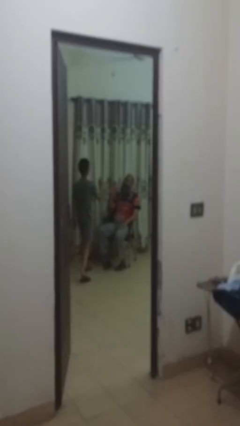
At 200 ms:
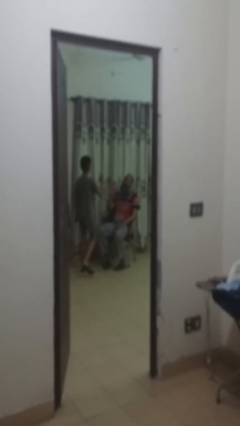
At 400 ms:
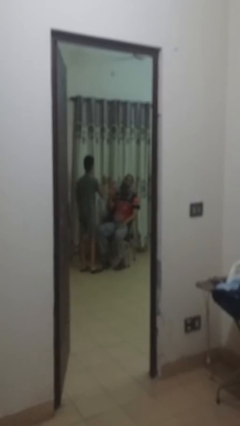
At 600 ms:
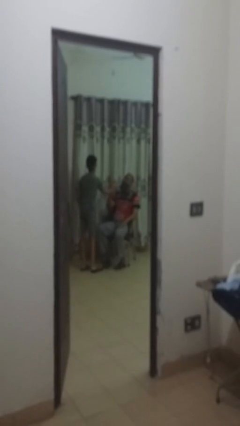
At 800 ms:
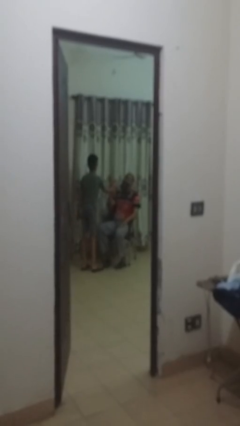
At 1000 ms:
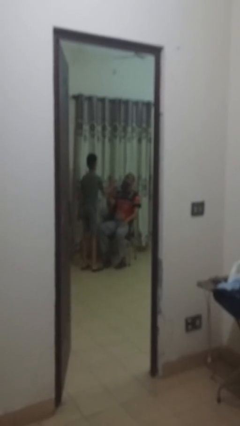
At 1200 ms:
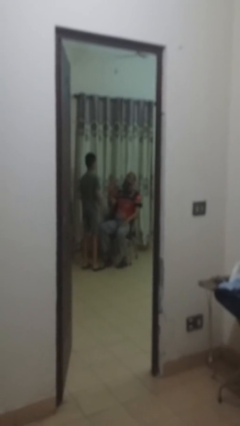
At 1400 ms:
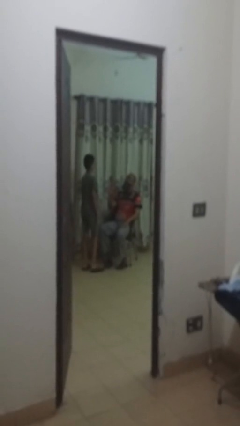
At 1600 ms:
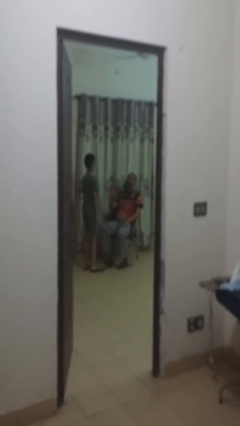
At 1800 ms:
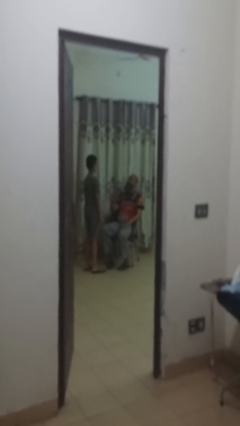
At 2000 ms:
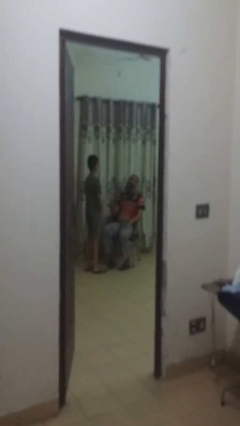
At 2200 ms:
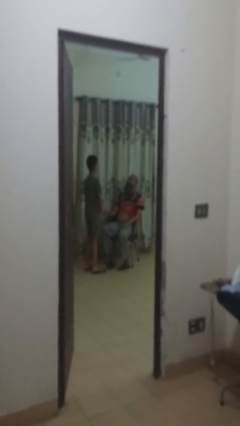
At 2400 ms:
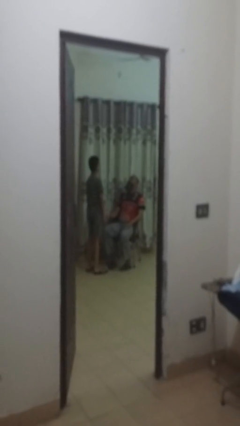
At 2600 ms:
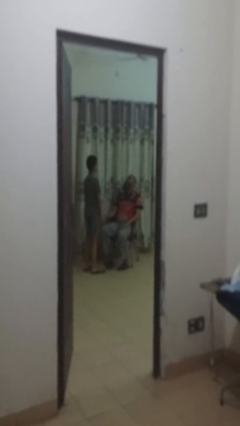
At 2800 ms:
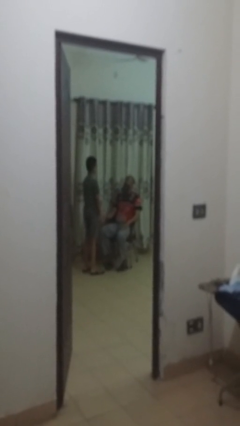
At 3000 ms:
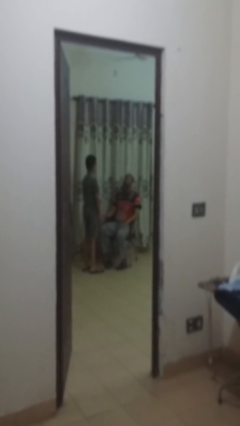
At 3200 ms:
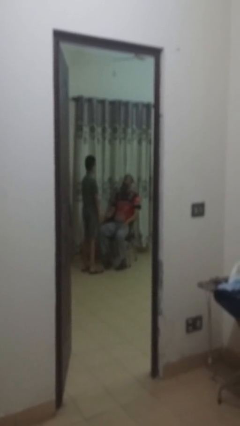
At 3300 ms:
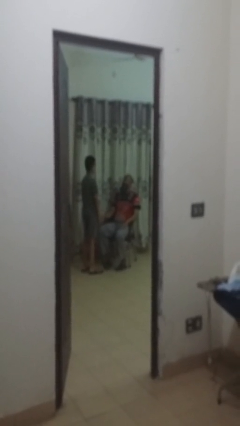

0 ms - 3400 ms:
person highfives hand

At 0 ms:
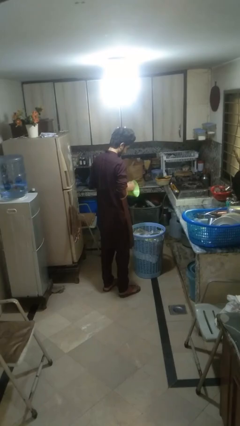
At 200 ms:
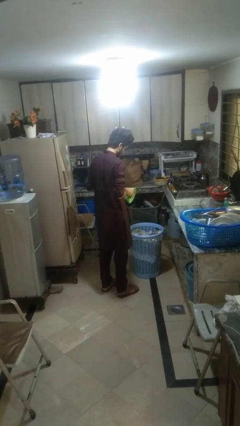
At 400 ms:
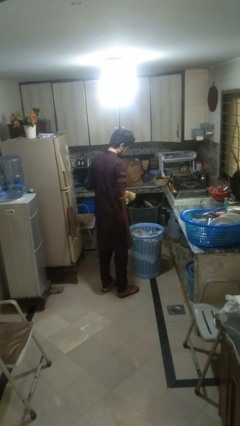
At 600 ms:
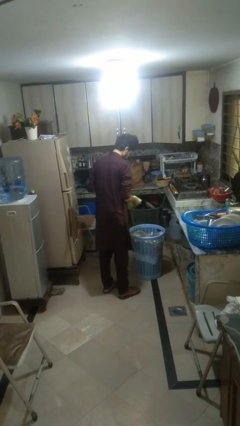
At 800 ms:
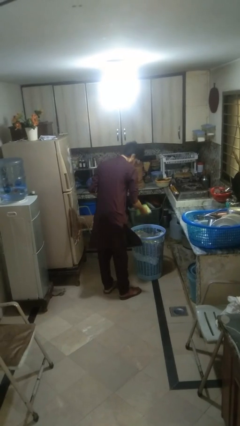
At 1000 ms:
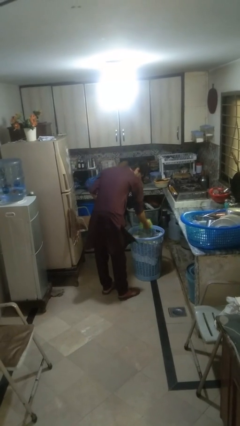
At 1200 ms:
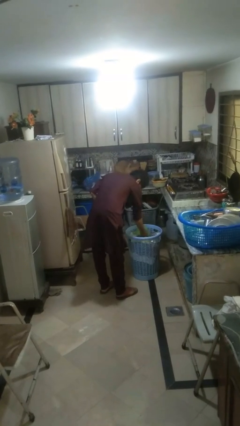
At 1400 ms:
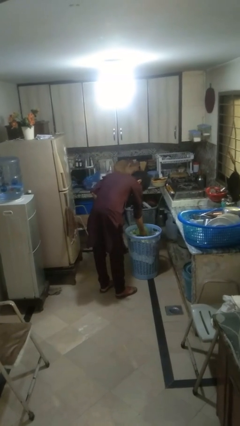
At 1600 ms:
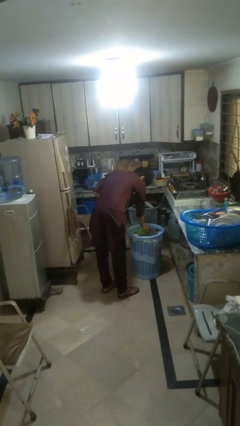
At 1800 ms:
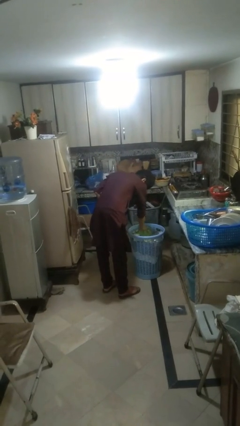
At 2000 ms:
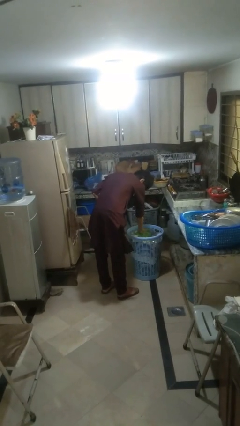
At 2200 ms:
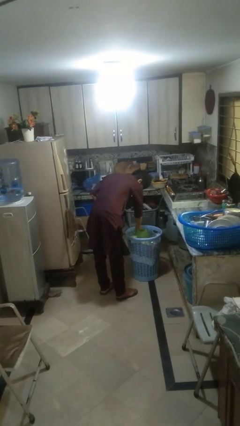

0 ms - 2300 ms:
person puts object into basket

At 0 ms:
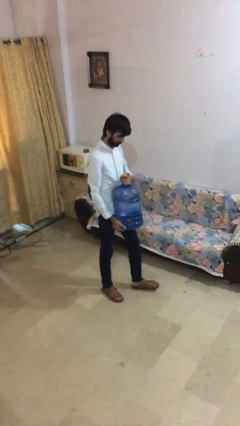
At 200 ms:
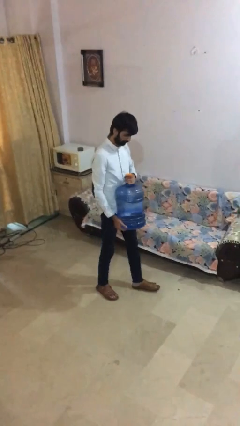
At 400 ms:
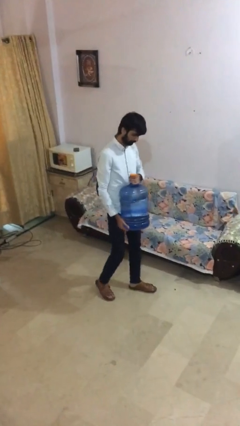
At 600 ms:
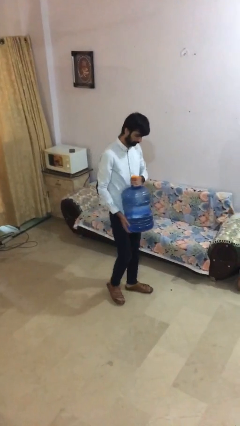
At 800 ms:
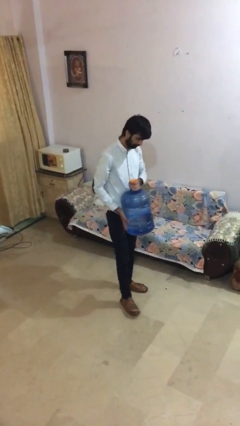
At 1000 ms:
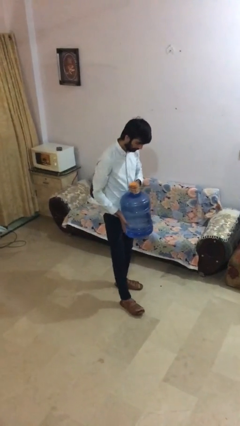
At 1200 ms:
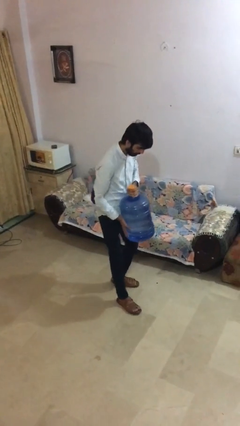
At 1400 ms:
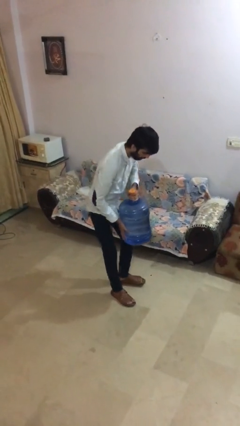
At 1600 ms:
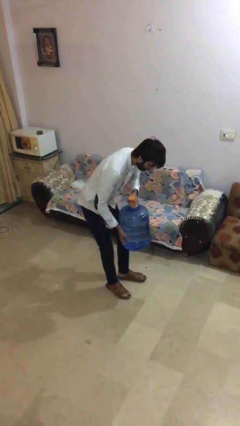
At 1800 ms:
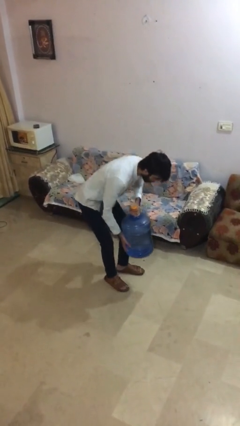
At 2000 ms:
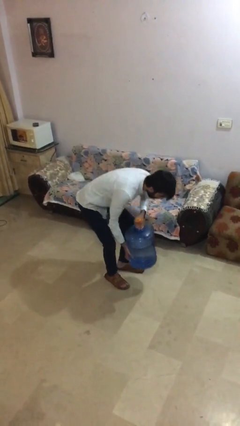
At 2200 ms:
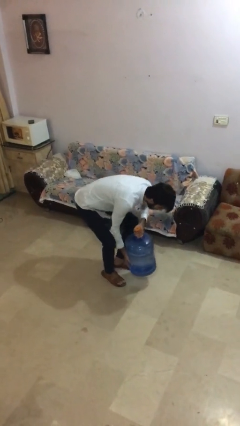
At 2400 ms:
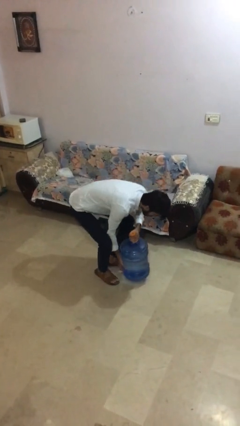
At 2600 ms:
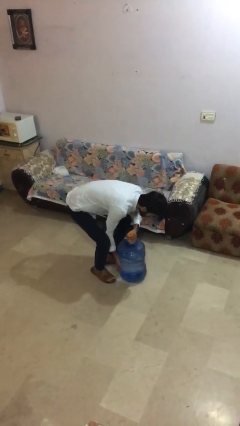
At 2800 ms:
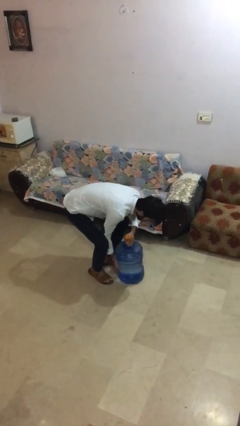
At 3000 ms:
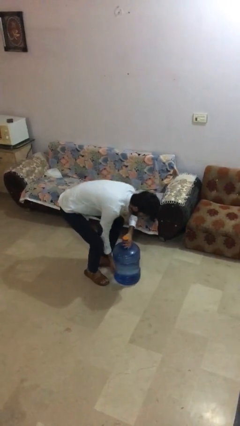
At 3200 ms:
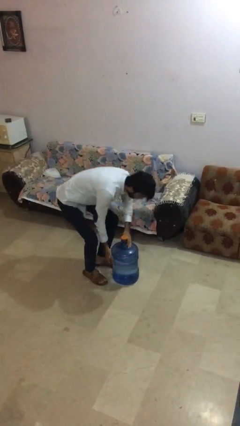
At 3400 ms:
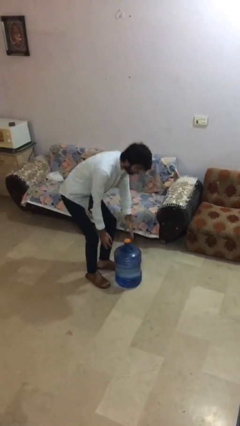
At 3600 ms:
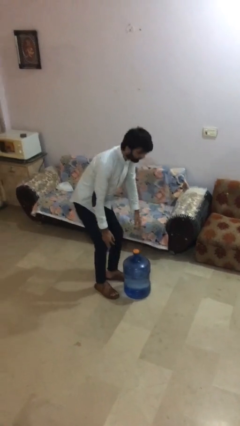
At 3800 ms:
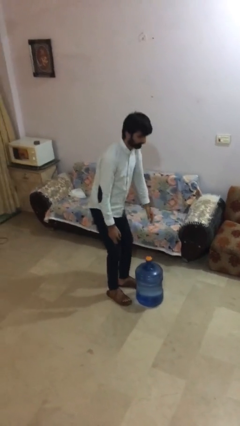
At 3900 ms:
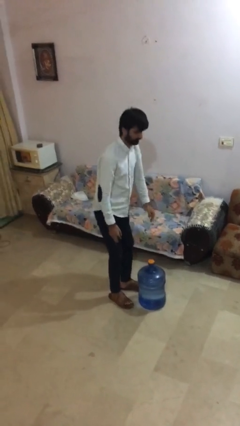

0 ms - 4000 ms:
person puts down object on floor

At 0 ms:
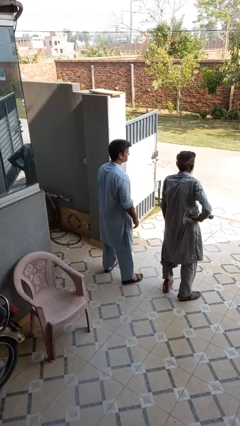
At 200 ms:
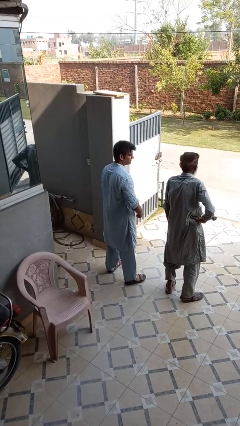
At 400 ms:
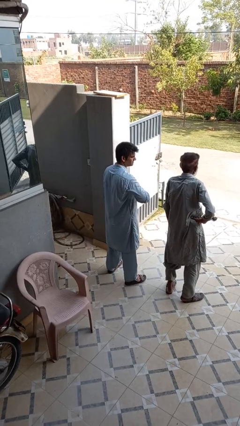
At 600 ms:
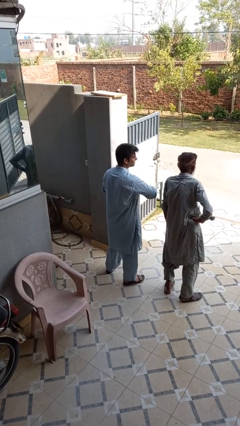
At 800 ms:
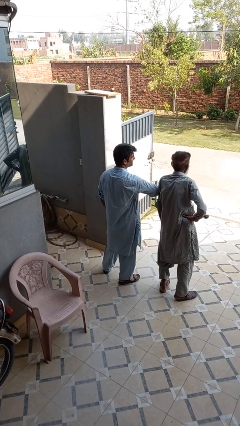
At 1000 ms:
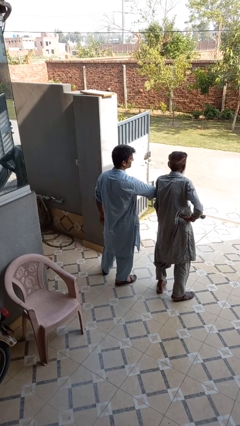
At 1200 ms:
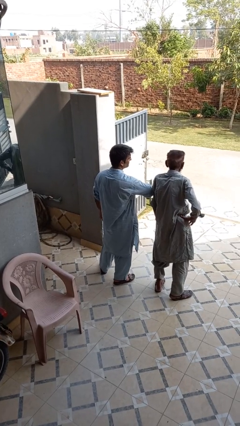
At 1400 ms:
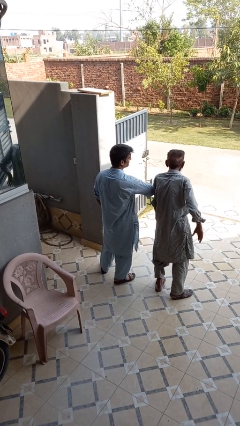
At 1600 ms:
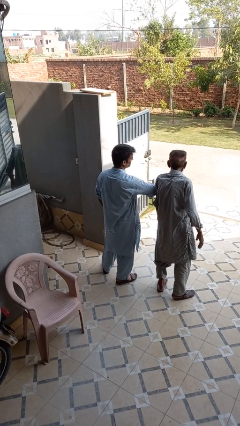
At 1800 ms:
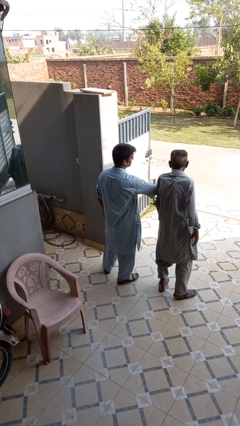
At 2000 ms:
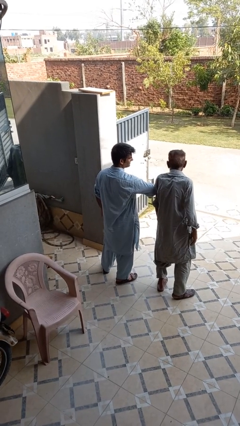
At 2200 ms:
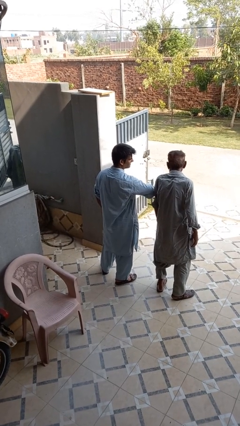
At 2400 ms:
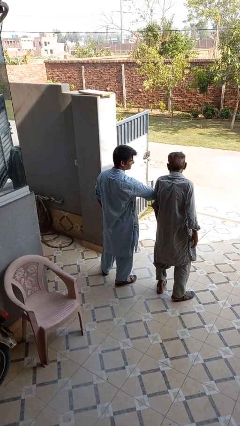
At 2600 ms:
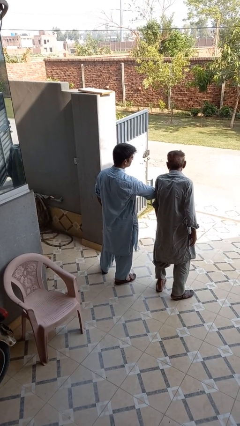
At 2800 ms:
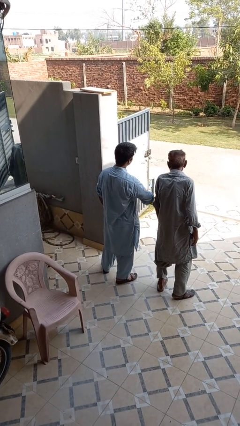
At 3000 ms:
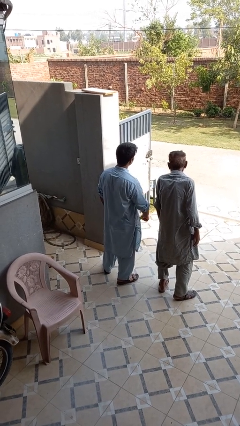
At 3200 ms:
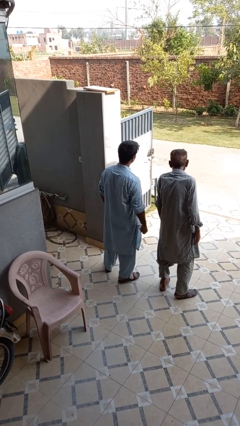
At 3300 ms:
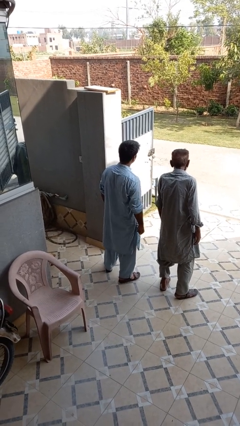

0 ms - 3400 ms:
person nudges person with elbow

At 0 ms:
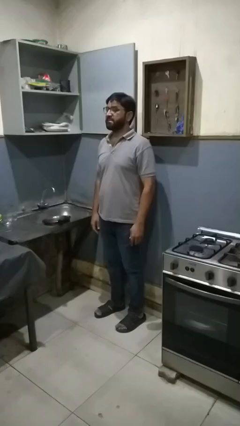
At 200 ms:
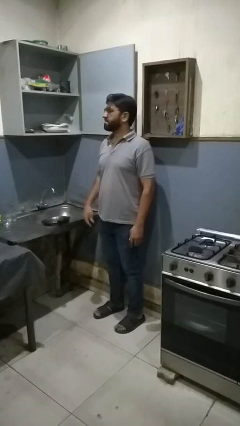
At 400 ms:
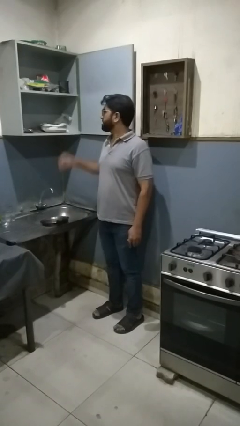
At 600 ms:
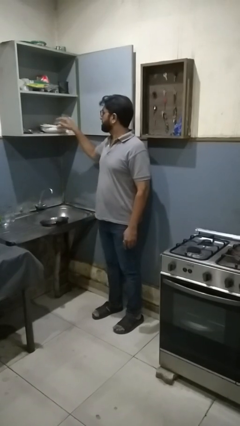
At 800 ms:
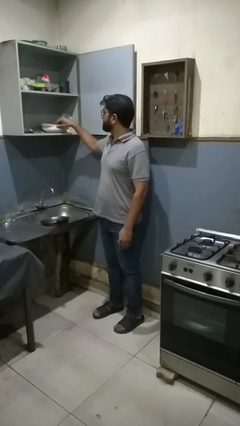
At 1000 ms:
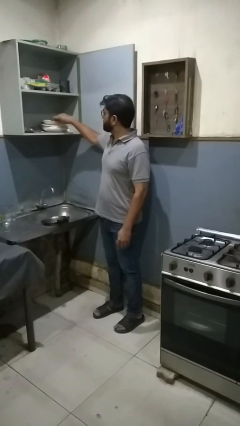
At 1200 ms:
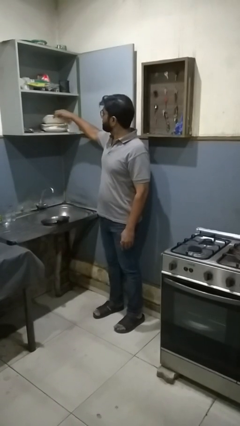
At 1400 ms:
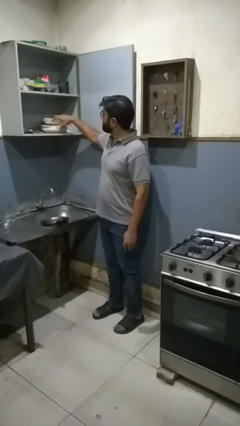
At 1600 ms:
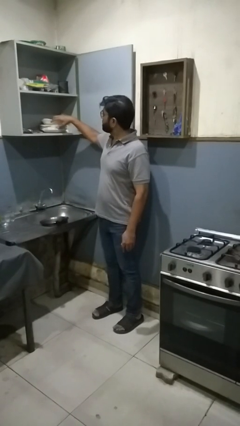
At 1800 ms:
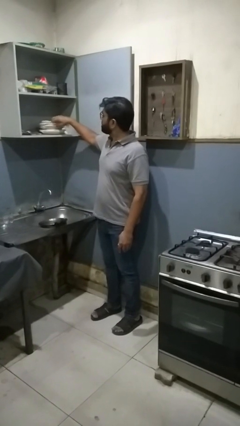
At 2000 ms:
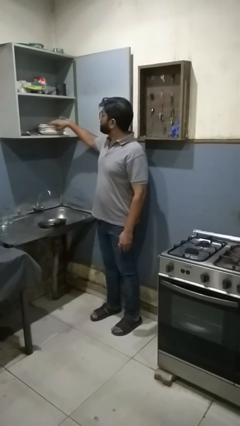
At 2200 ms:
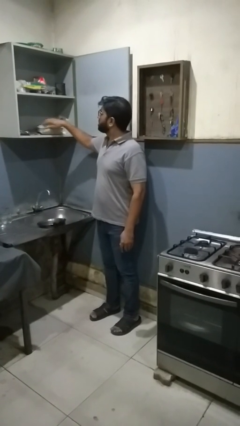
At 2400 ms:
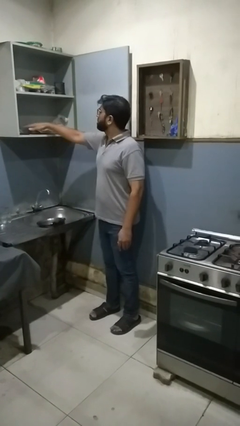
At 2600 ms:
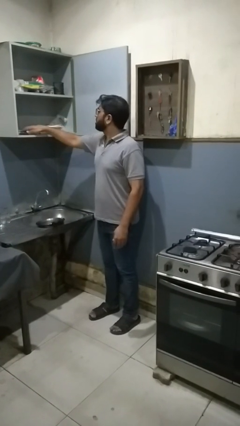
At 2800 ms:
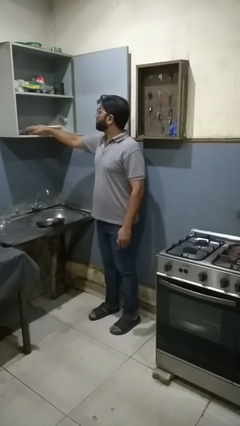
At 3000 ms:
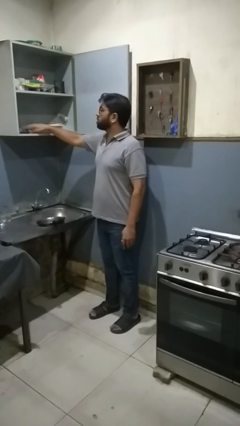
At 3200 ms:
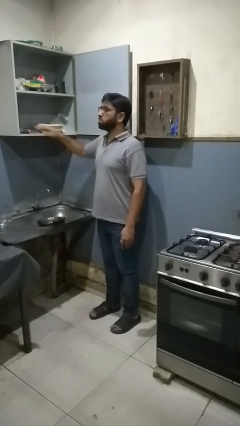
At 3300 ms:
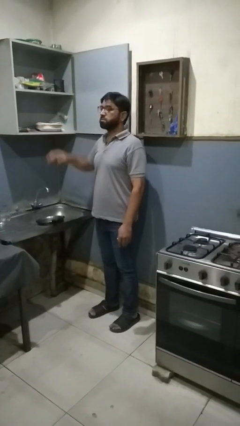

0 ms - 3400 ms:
person searches in kitchen drawer

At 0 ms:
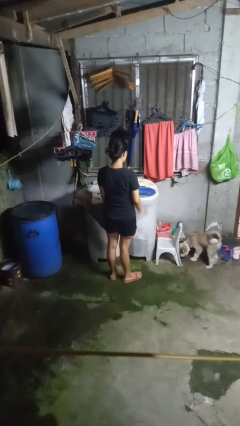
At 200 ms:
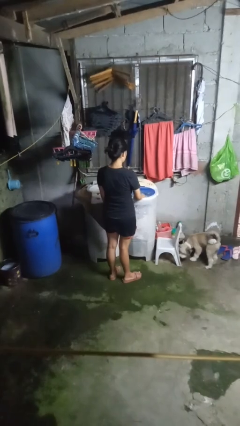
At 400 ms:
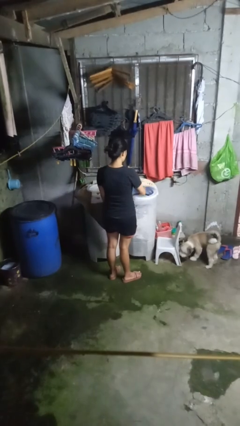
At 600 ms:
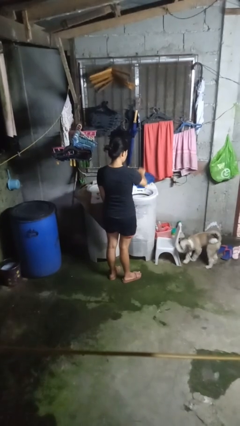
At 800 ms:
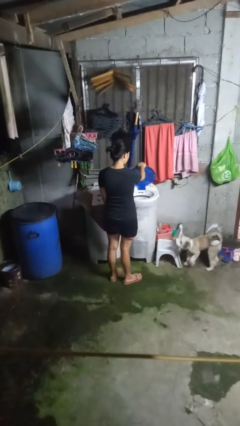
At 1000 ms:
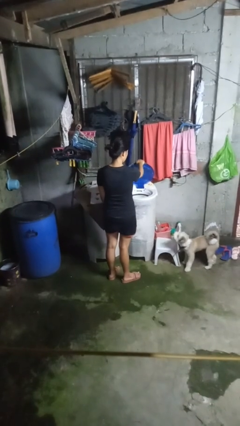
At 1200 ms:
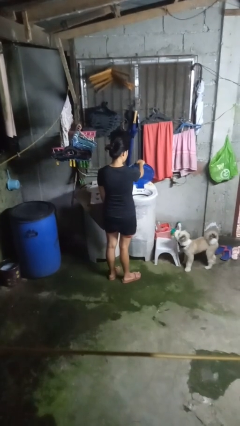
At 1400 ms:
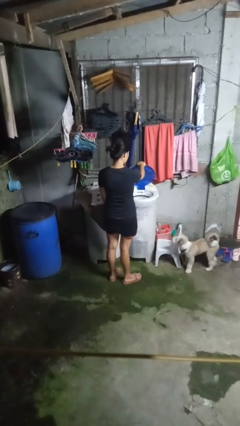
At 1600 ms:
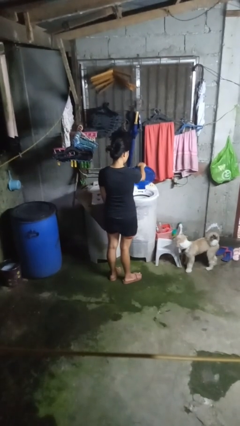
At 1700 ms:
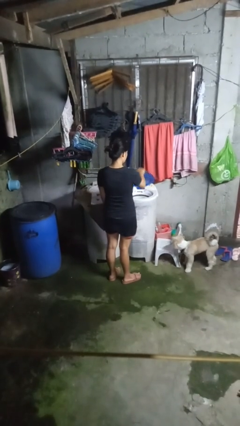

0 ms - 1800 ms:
person opens clothes washer
